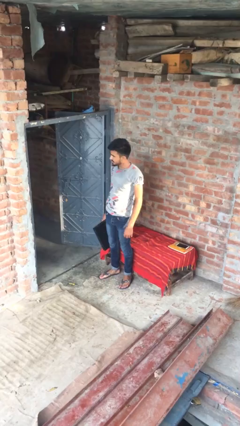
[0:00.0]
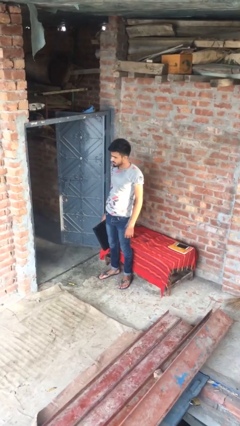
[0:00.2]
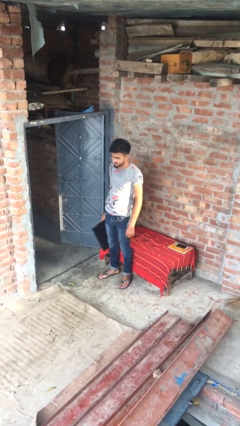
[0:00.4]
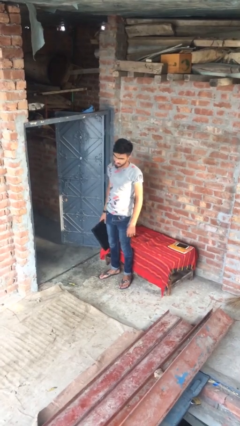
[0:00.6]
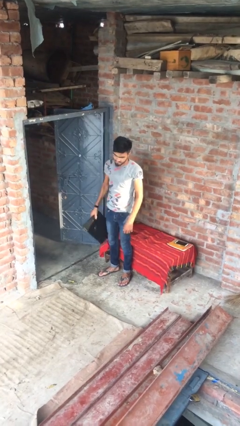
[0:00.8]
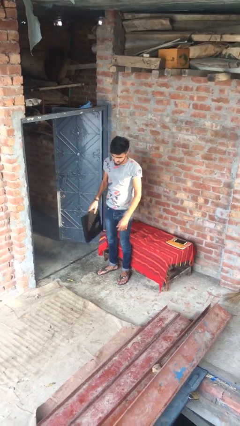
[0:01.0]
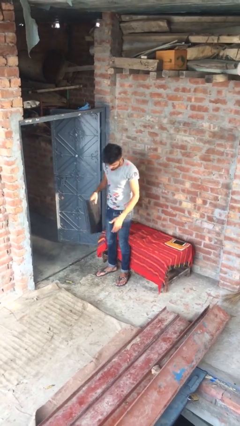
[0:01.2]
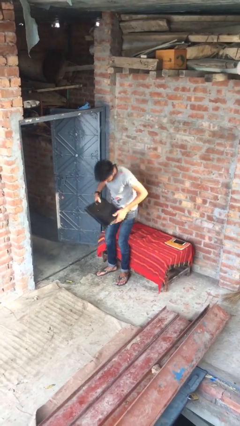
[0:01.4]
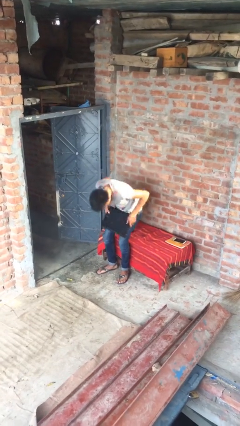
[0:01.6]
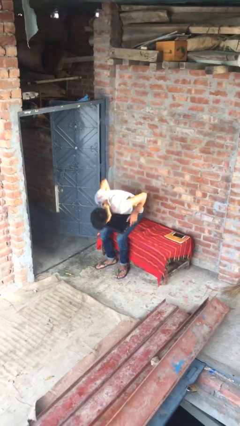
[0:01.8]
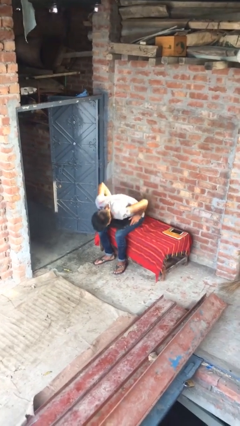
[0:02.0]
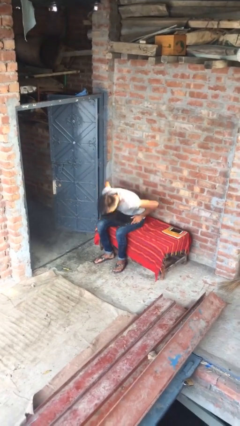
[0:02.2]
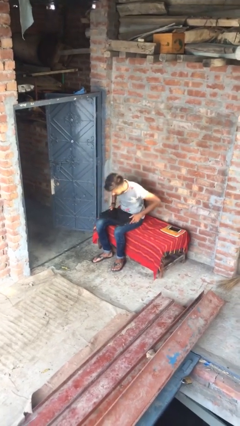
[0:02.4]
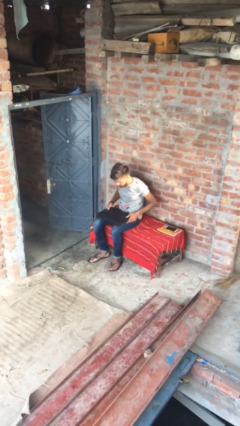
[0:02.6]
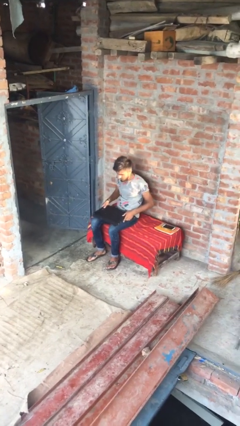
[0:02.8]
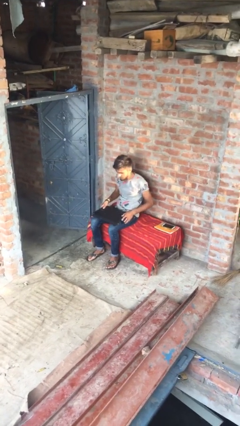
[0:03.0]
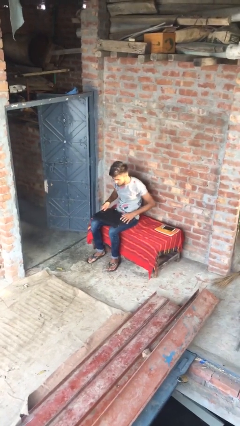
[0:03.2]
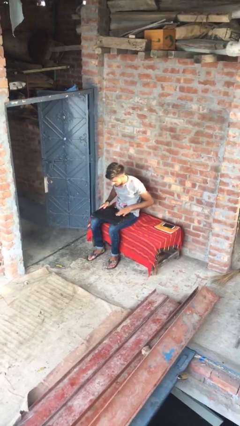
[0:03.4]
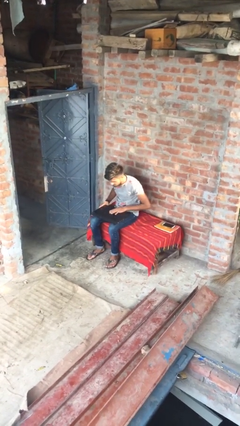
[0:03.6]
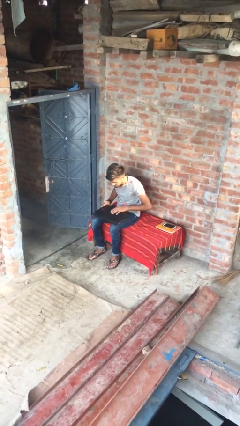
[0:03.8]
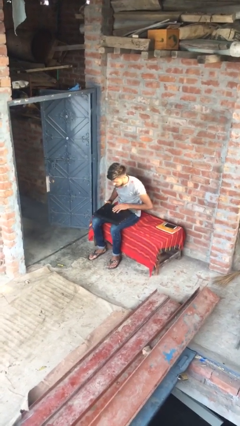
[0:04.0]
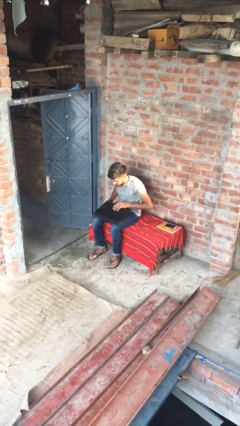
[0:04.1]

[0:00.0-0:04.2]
person sits down

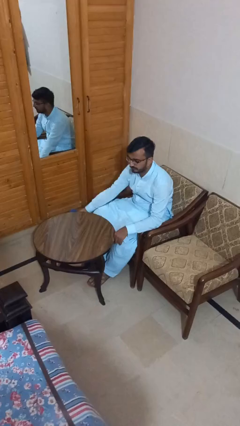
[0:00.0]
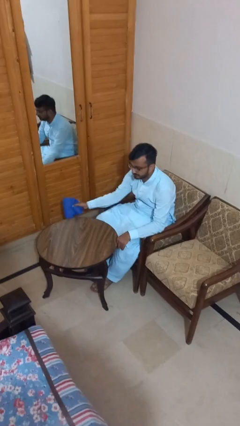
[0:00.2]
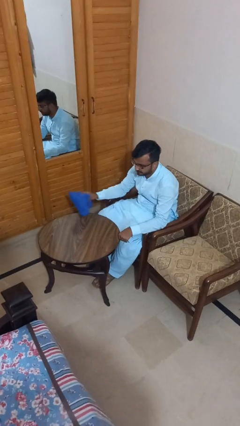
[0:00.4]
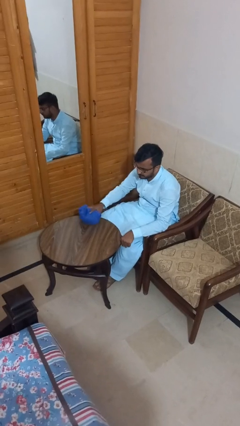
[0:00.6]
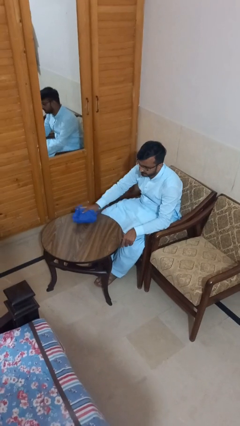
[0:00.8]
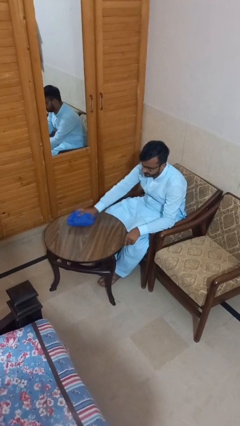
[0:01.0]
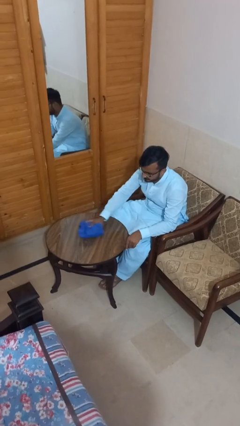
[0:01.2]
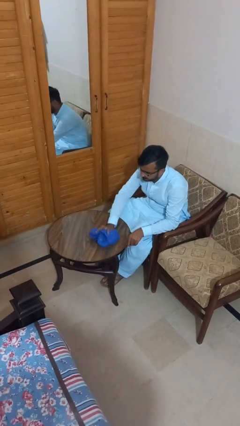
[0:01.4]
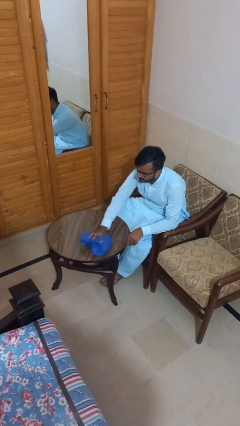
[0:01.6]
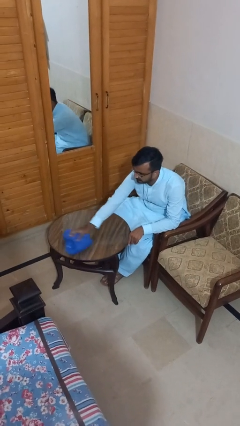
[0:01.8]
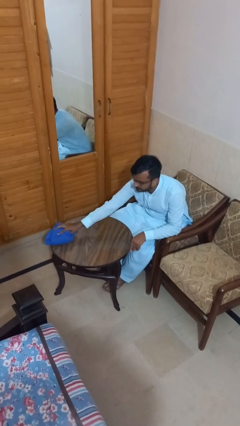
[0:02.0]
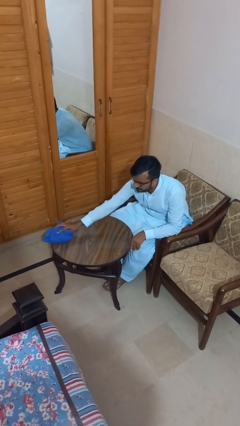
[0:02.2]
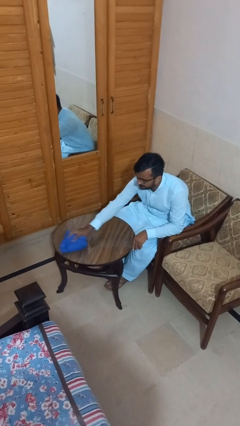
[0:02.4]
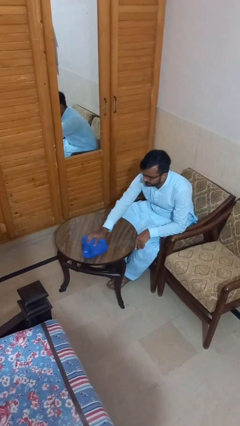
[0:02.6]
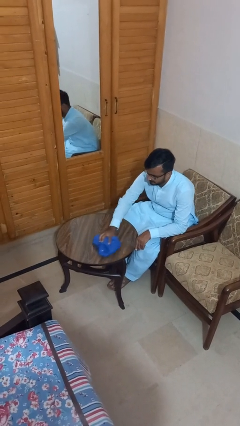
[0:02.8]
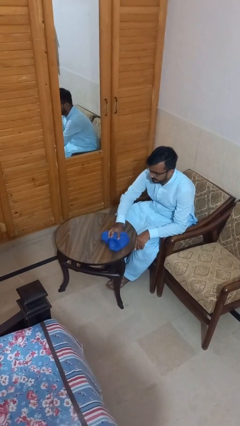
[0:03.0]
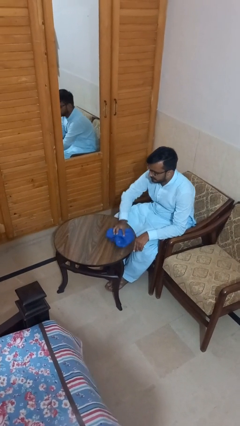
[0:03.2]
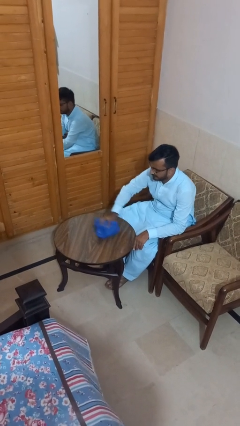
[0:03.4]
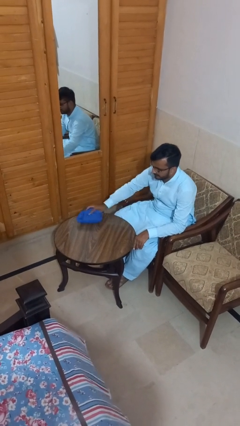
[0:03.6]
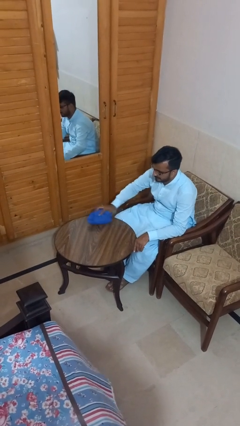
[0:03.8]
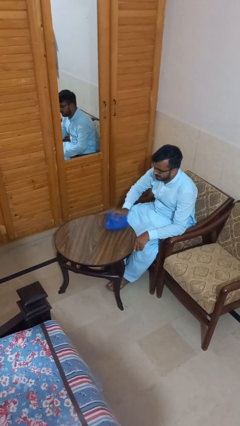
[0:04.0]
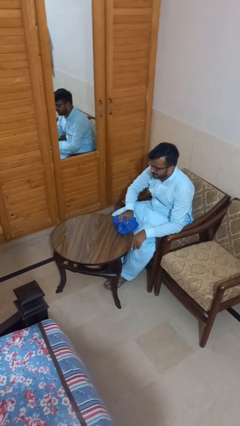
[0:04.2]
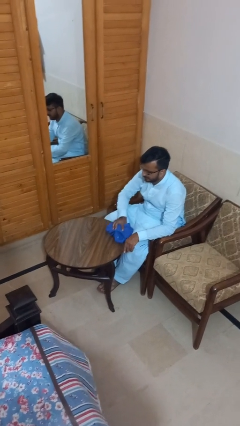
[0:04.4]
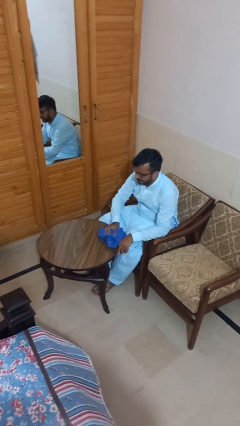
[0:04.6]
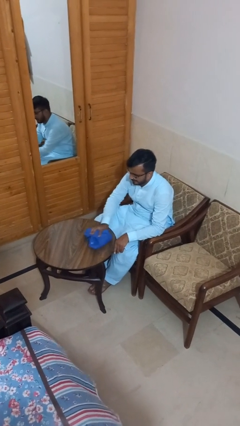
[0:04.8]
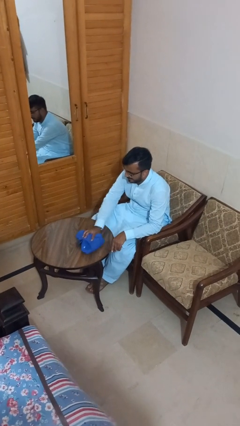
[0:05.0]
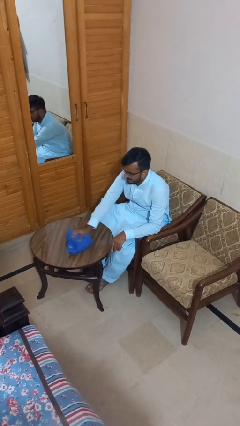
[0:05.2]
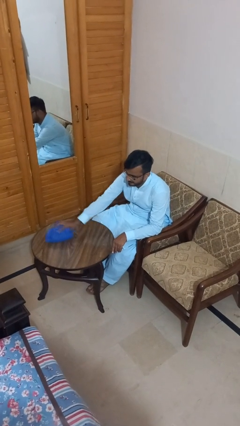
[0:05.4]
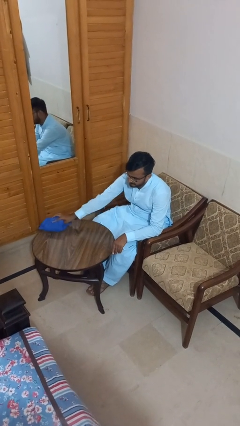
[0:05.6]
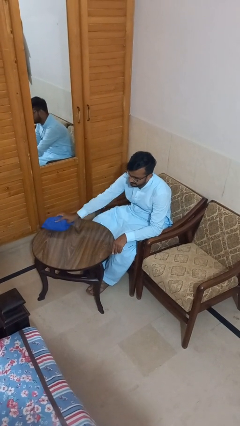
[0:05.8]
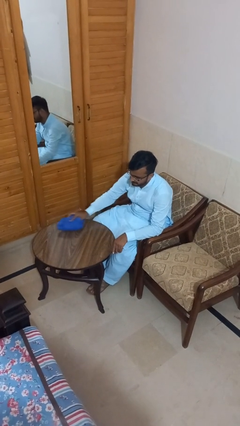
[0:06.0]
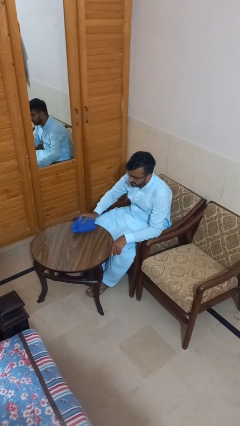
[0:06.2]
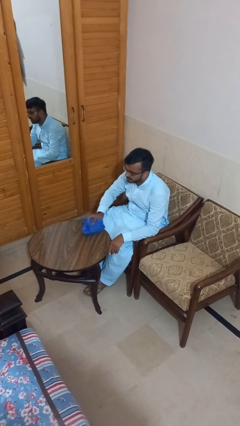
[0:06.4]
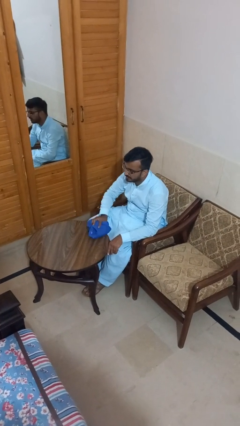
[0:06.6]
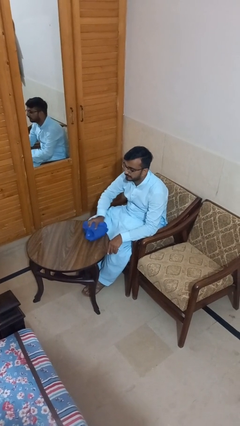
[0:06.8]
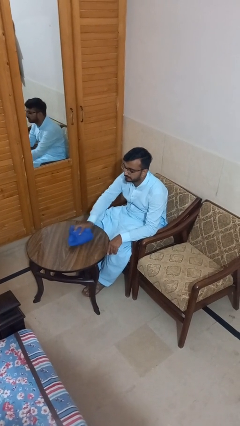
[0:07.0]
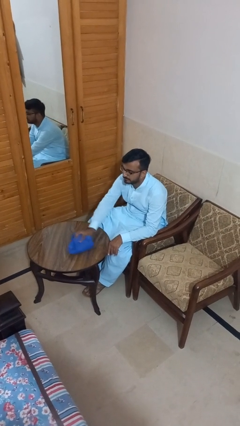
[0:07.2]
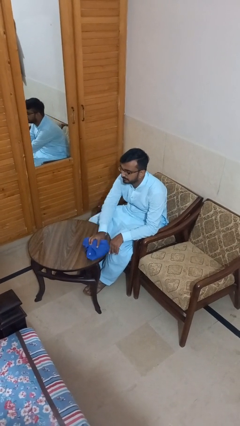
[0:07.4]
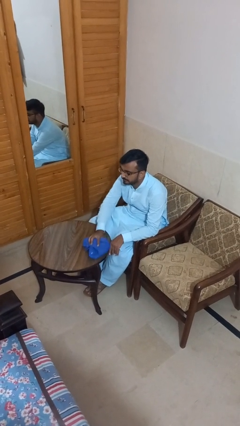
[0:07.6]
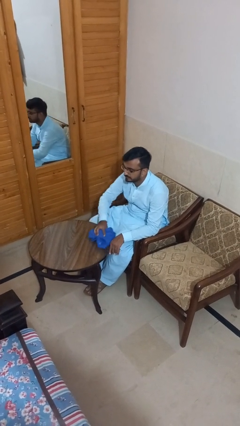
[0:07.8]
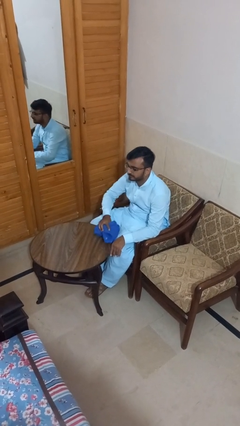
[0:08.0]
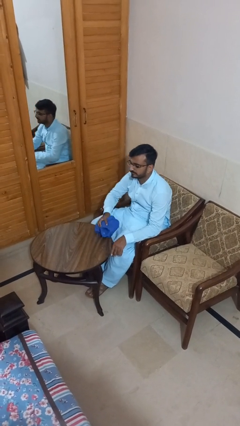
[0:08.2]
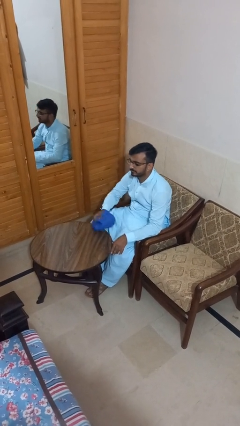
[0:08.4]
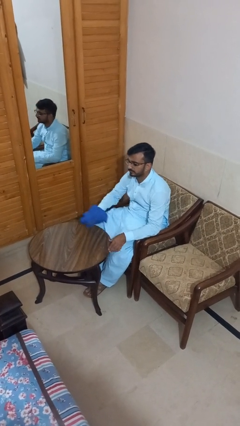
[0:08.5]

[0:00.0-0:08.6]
person cleans table with rag

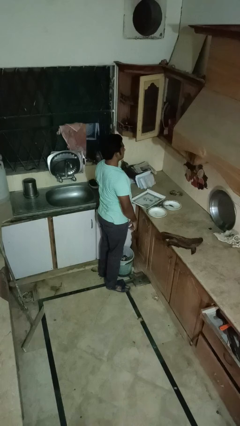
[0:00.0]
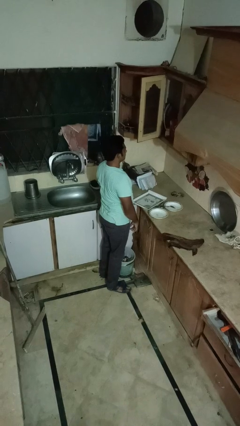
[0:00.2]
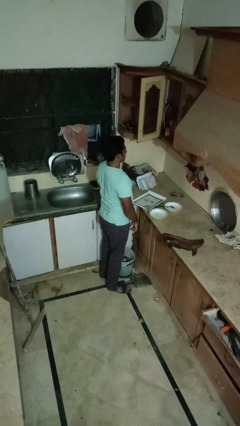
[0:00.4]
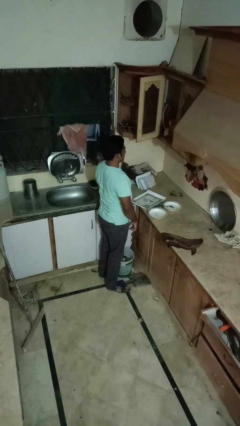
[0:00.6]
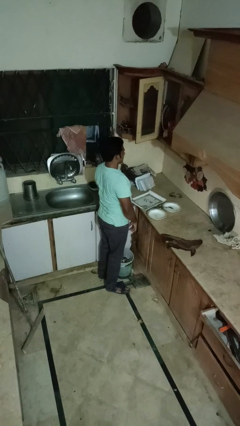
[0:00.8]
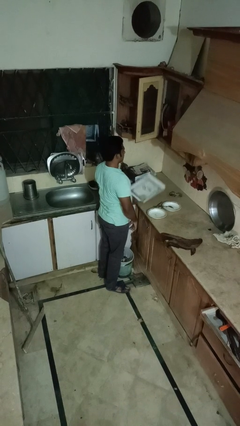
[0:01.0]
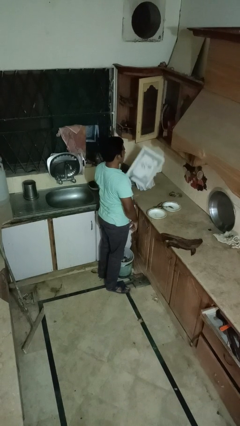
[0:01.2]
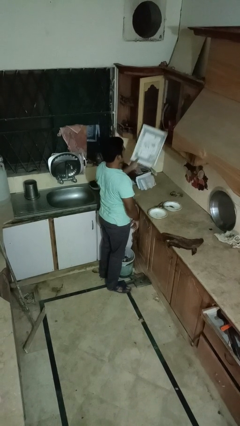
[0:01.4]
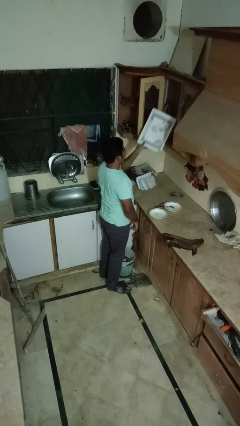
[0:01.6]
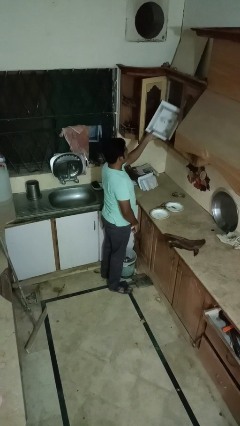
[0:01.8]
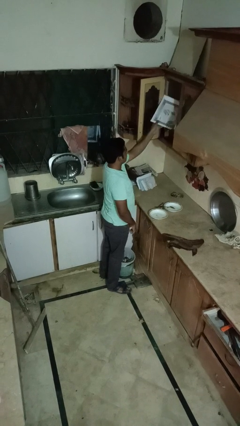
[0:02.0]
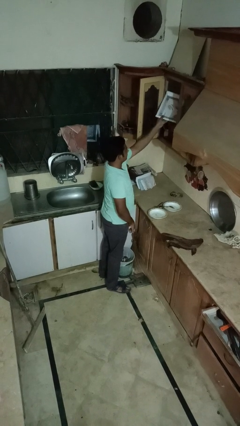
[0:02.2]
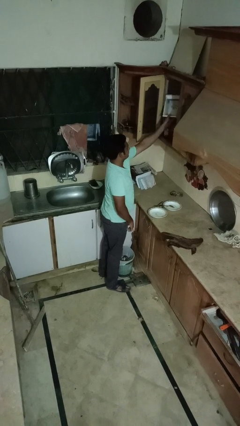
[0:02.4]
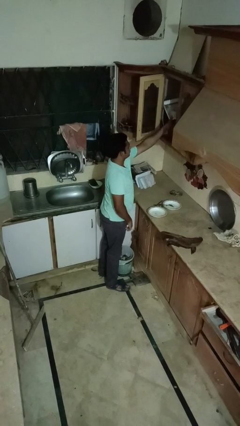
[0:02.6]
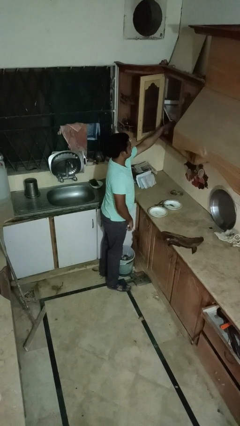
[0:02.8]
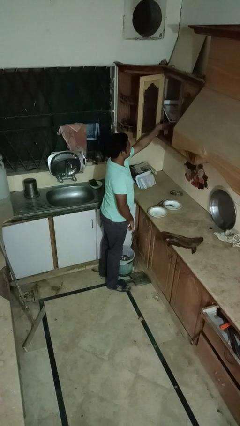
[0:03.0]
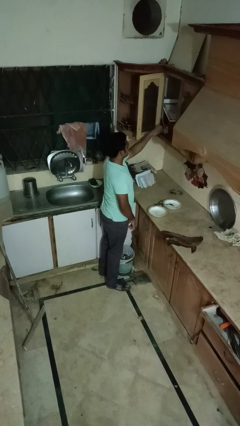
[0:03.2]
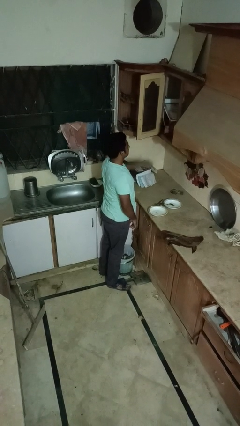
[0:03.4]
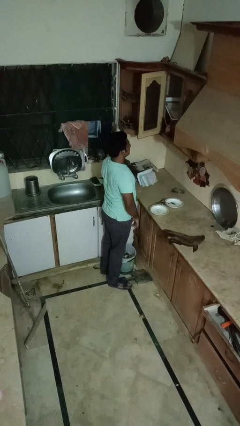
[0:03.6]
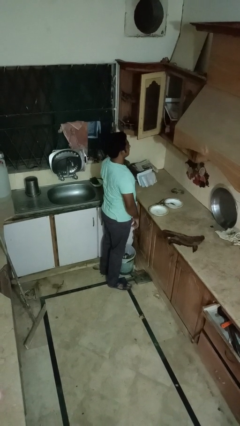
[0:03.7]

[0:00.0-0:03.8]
person puts object in cabinet

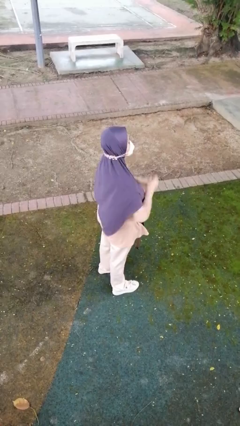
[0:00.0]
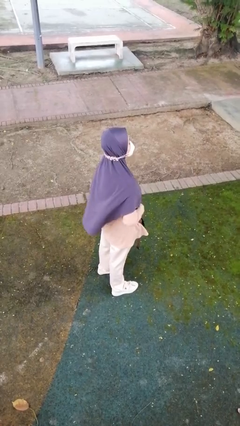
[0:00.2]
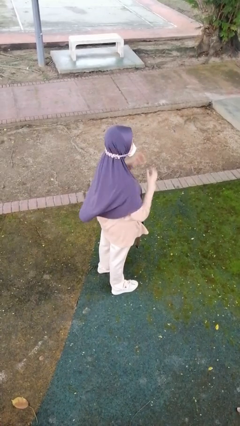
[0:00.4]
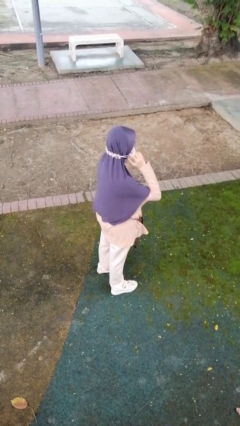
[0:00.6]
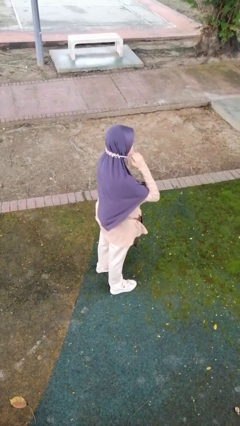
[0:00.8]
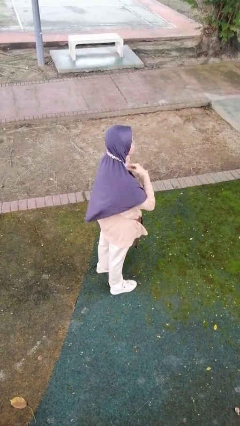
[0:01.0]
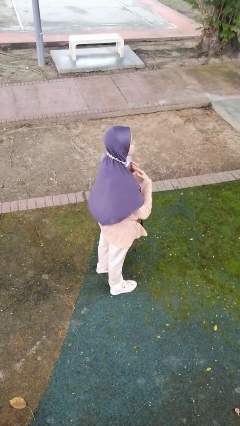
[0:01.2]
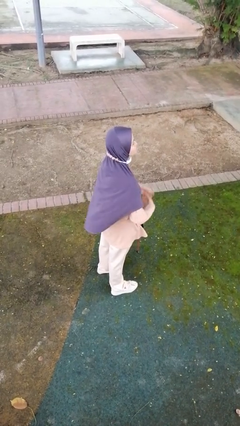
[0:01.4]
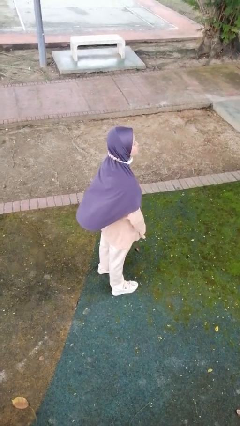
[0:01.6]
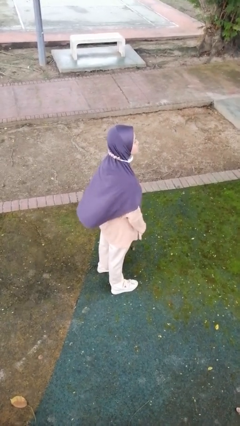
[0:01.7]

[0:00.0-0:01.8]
person takes off facemask
